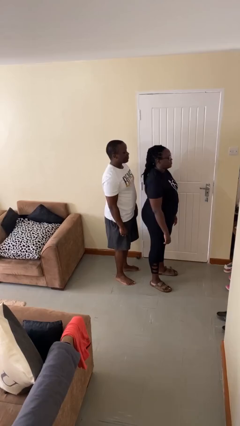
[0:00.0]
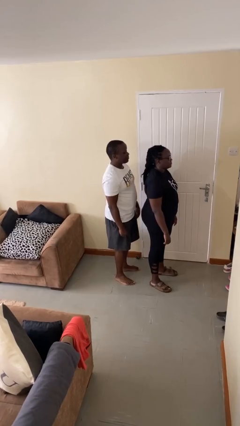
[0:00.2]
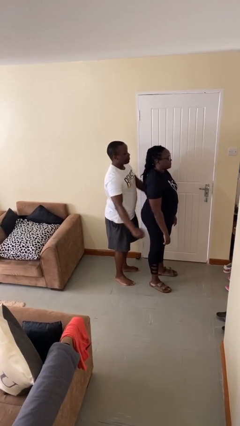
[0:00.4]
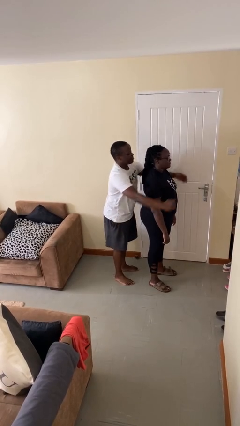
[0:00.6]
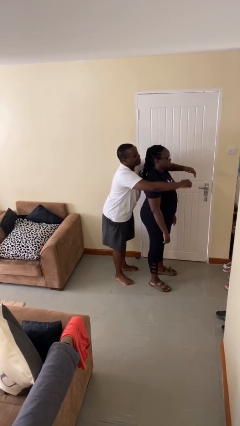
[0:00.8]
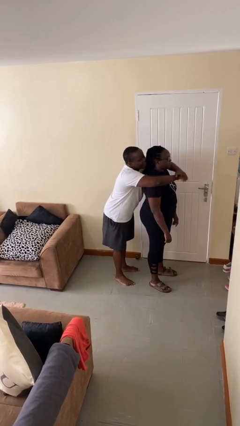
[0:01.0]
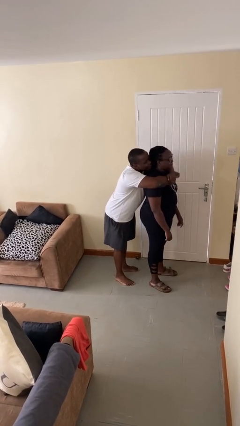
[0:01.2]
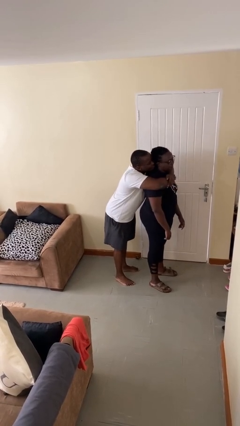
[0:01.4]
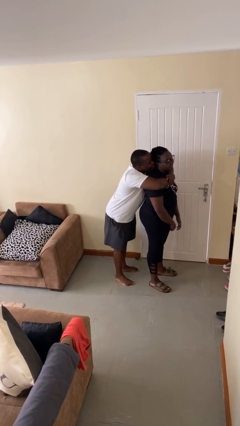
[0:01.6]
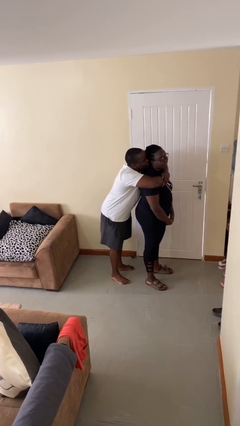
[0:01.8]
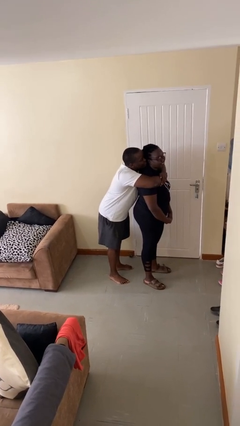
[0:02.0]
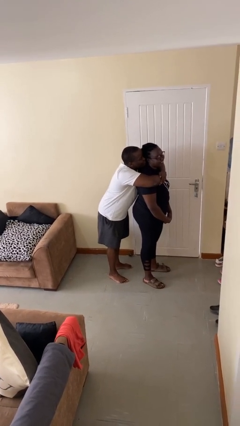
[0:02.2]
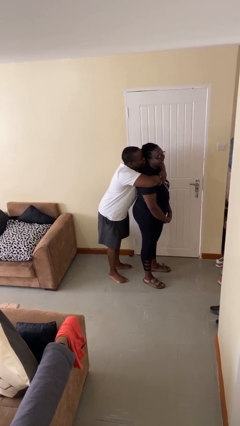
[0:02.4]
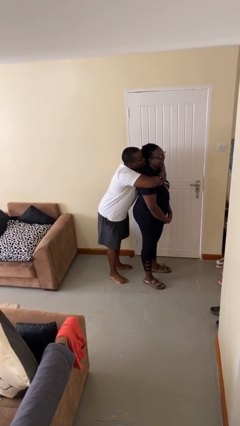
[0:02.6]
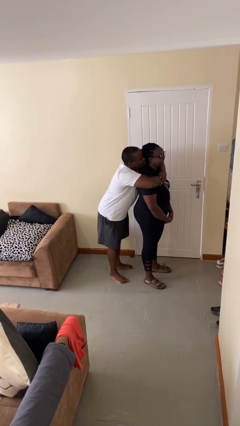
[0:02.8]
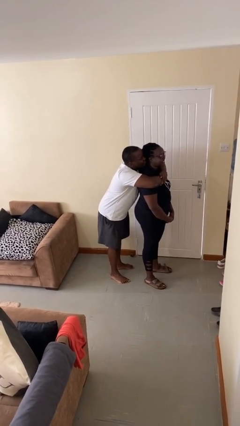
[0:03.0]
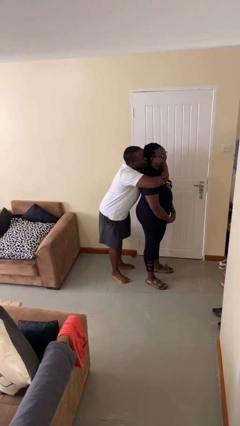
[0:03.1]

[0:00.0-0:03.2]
person hugs person from behind

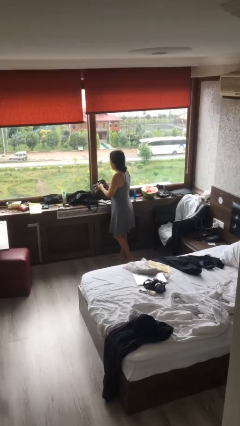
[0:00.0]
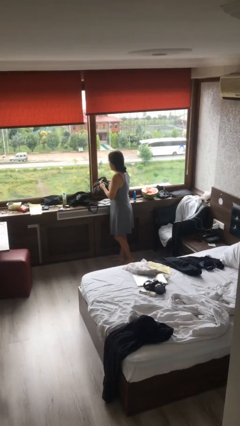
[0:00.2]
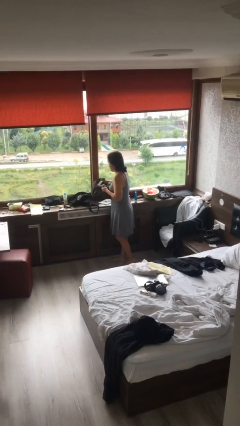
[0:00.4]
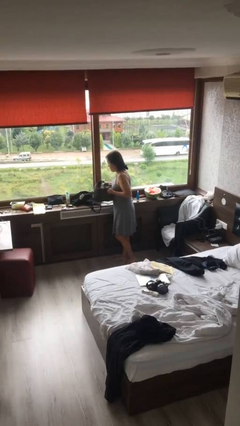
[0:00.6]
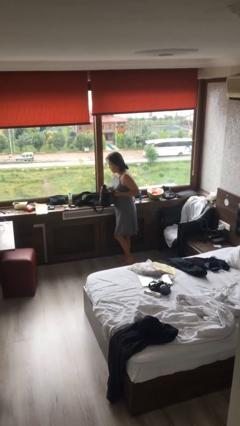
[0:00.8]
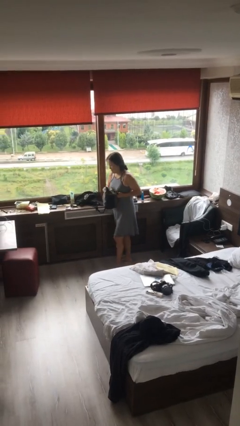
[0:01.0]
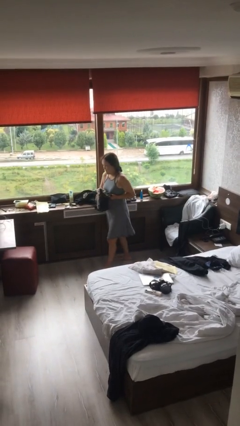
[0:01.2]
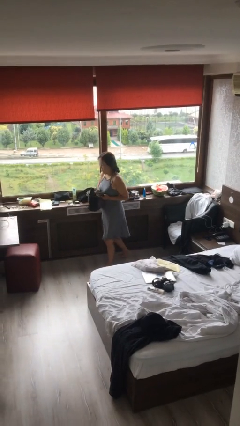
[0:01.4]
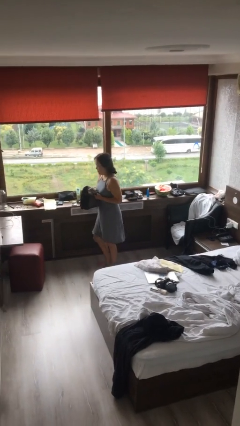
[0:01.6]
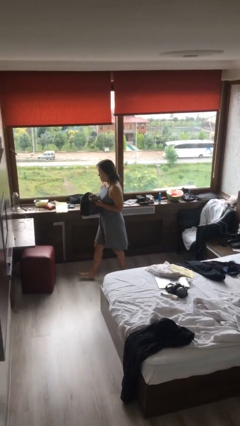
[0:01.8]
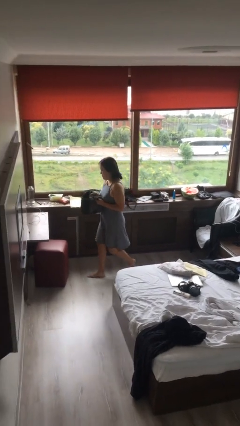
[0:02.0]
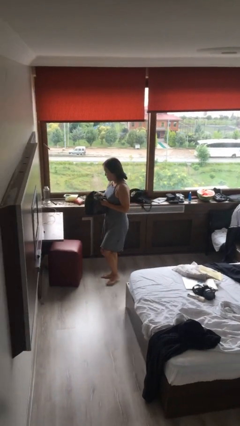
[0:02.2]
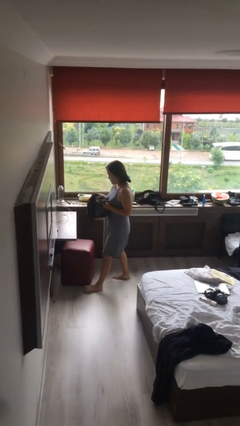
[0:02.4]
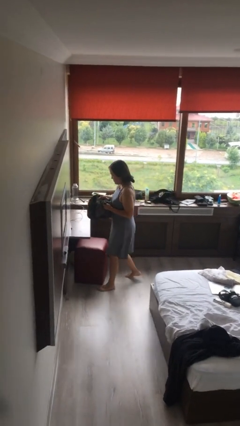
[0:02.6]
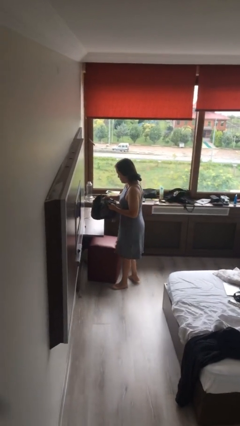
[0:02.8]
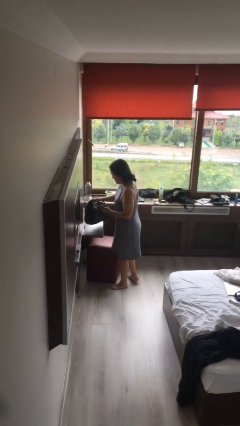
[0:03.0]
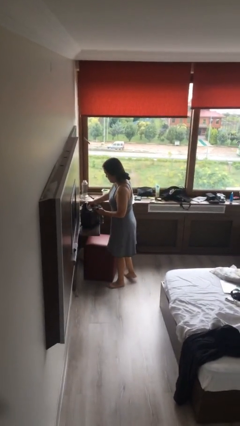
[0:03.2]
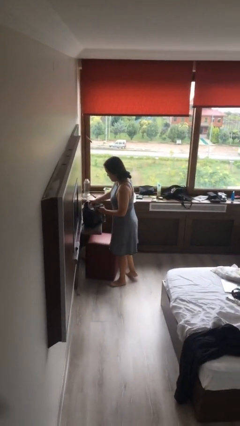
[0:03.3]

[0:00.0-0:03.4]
person picks up object from shelf

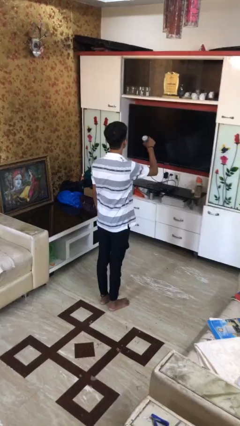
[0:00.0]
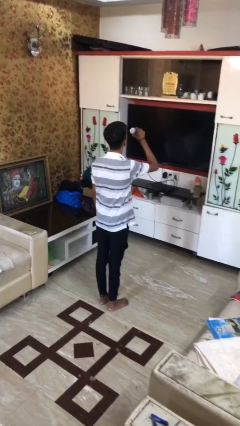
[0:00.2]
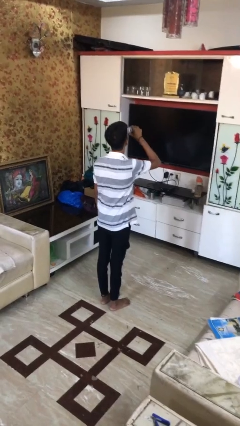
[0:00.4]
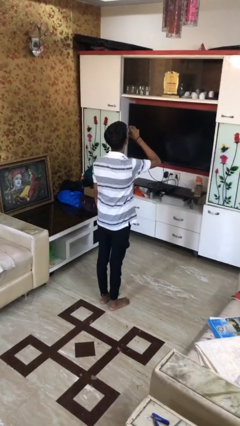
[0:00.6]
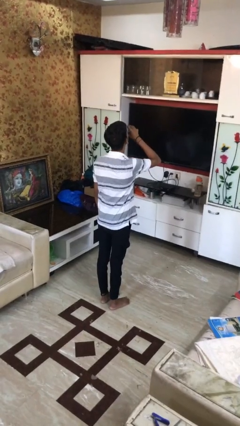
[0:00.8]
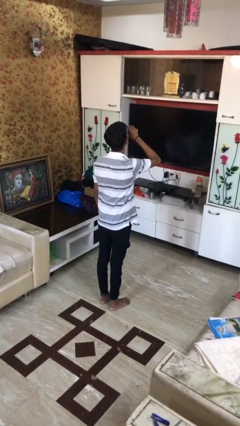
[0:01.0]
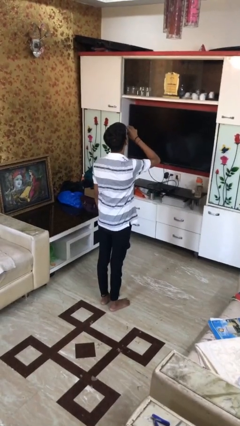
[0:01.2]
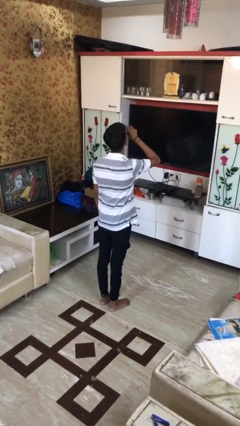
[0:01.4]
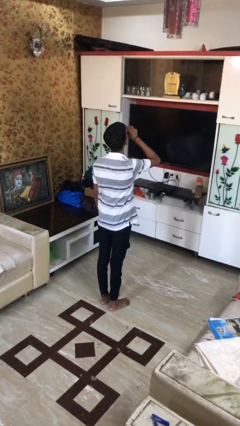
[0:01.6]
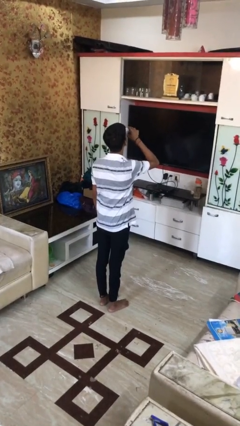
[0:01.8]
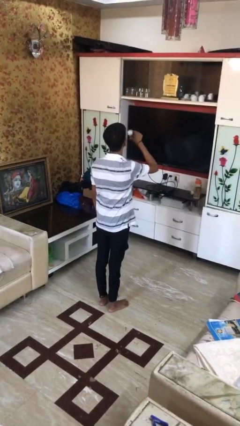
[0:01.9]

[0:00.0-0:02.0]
person drinks from beverage can

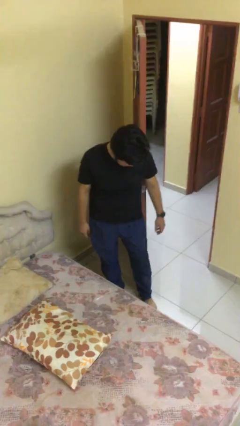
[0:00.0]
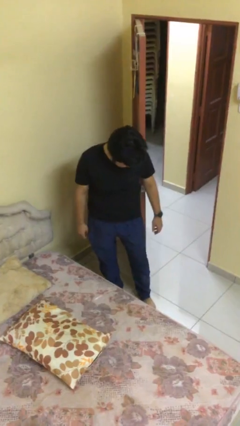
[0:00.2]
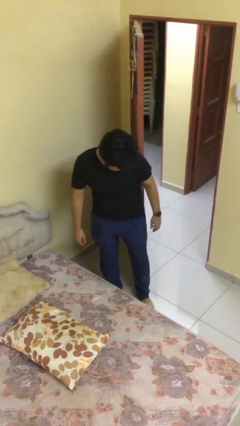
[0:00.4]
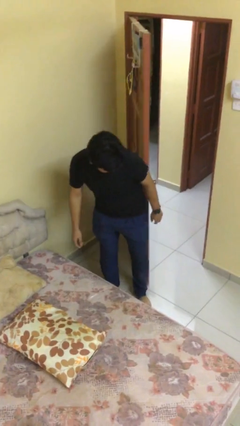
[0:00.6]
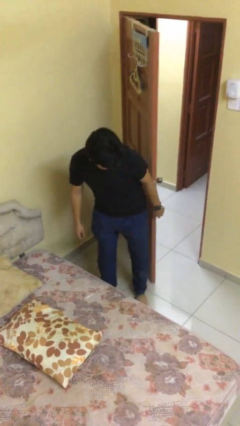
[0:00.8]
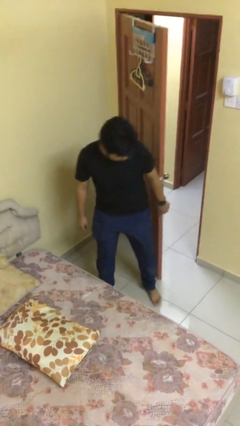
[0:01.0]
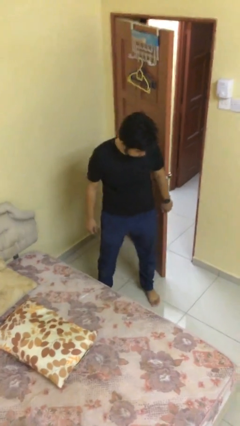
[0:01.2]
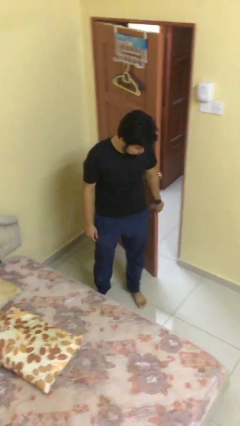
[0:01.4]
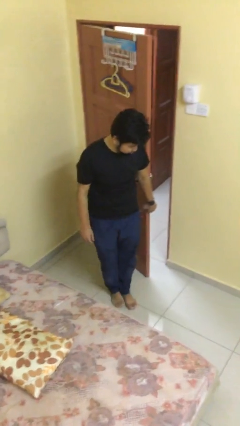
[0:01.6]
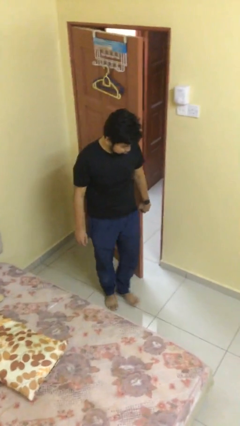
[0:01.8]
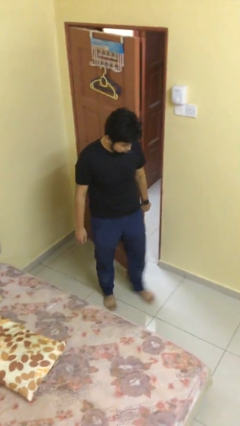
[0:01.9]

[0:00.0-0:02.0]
person closes door with hip

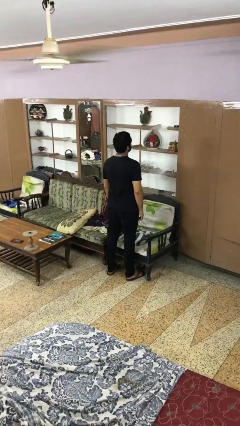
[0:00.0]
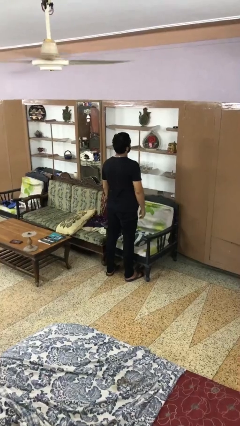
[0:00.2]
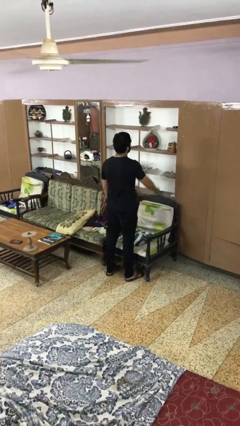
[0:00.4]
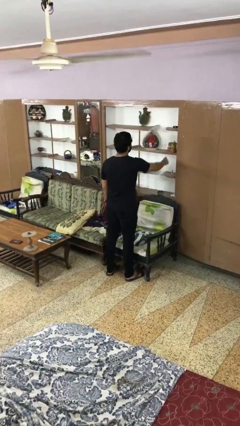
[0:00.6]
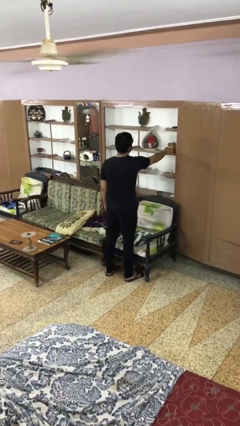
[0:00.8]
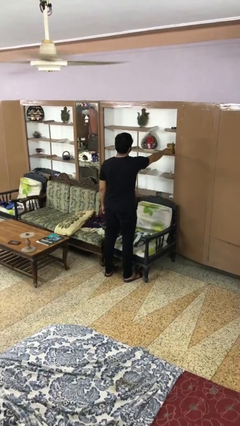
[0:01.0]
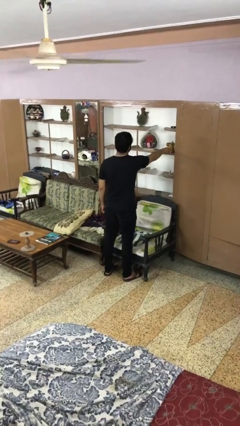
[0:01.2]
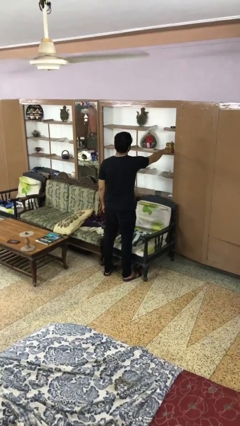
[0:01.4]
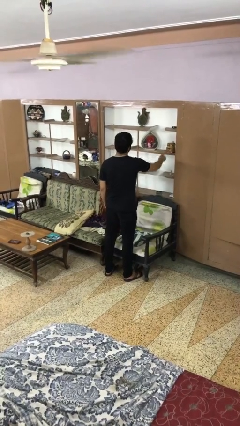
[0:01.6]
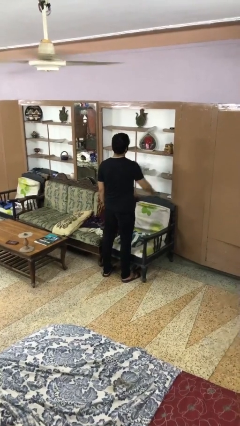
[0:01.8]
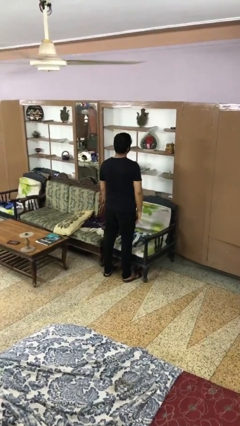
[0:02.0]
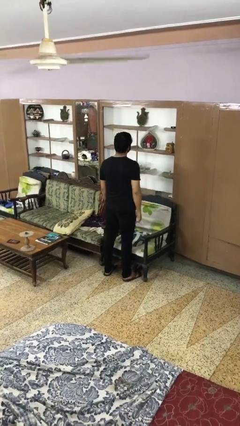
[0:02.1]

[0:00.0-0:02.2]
person taps object with finger

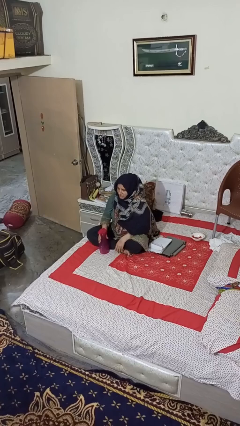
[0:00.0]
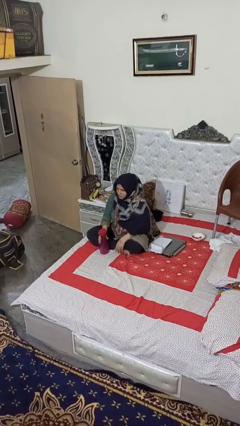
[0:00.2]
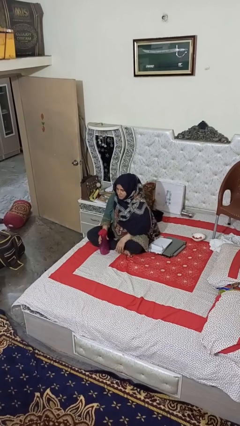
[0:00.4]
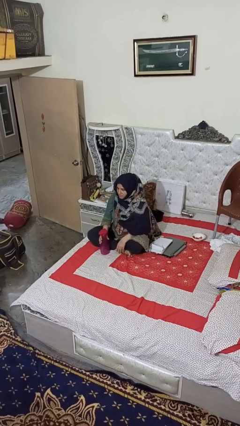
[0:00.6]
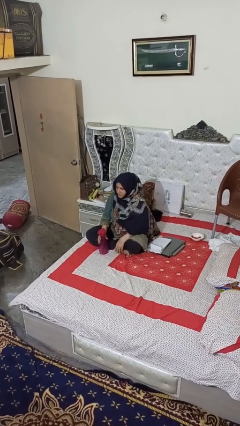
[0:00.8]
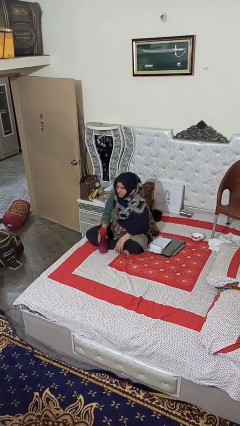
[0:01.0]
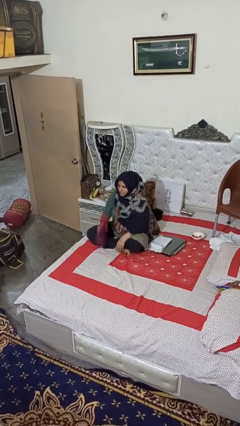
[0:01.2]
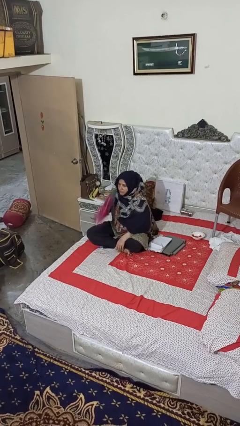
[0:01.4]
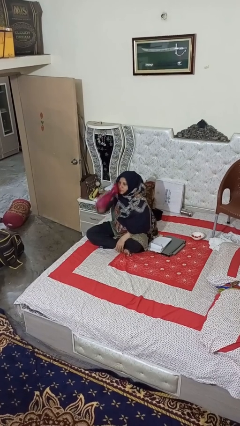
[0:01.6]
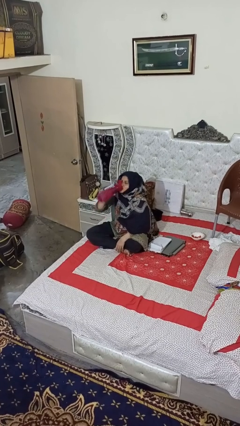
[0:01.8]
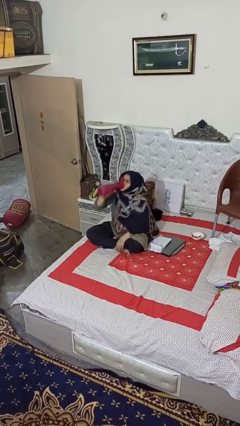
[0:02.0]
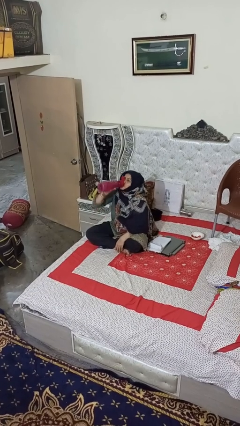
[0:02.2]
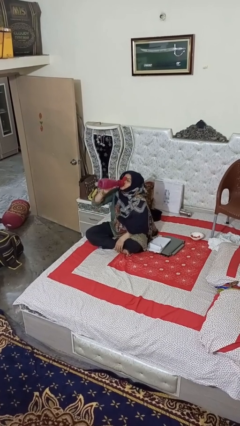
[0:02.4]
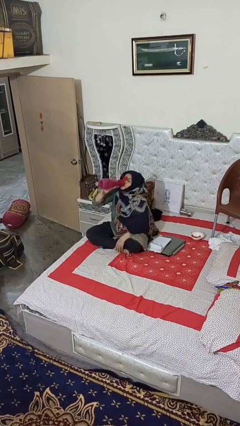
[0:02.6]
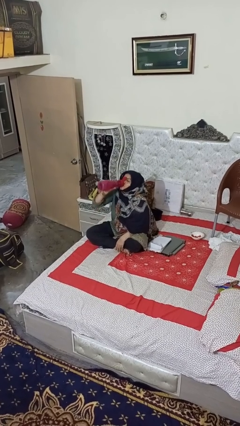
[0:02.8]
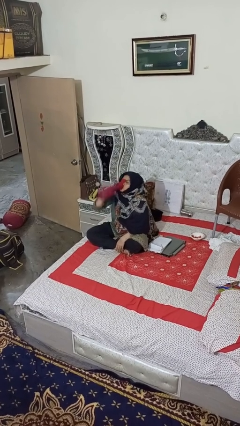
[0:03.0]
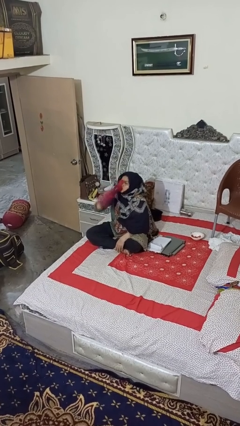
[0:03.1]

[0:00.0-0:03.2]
person drinks from bottle

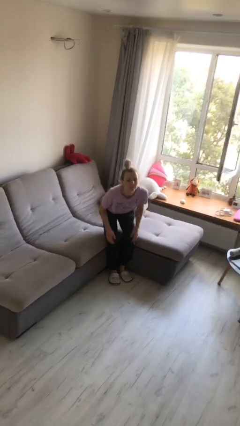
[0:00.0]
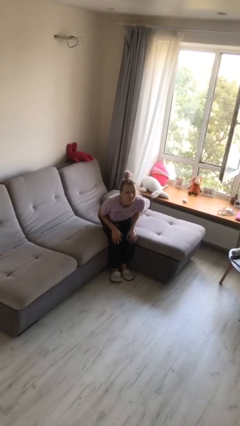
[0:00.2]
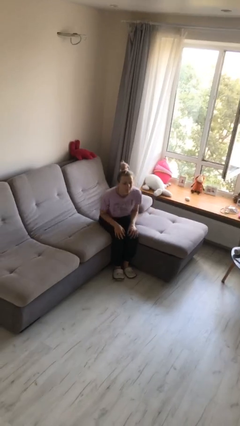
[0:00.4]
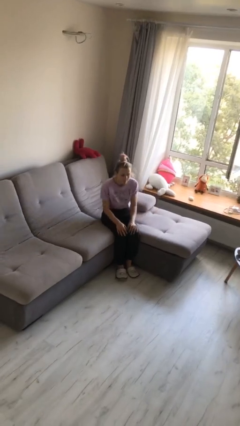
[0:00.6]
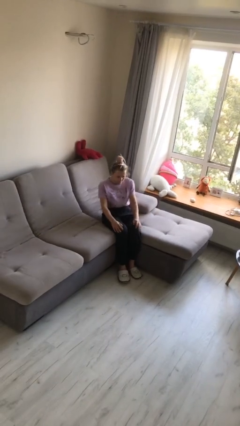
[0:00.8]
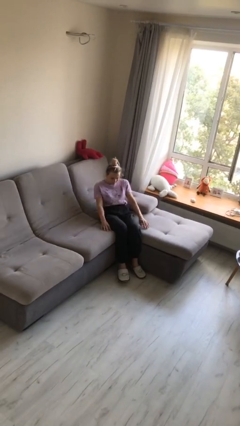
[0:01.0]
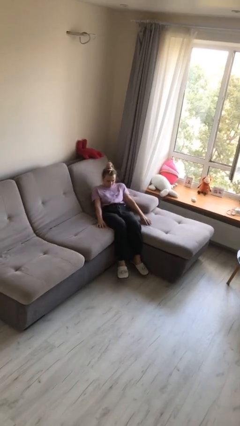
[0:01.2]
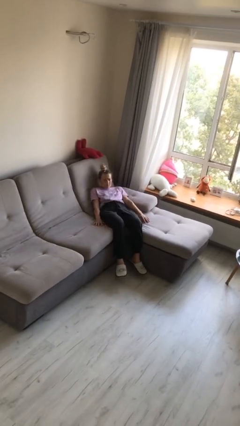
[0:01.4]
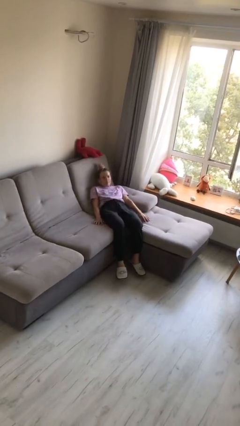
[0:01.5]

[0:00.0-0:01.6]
person lies down on couch
